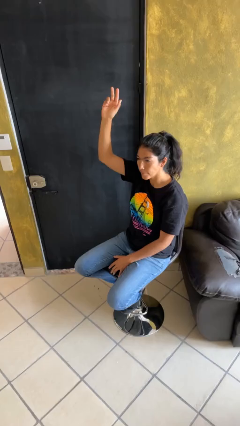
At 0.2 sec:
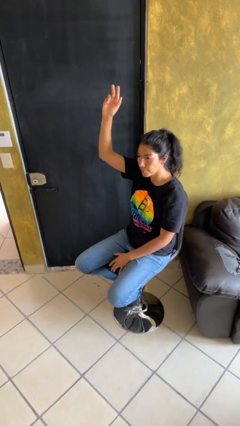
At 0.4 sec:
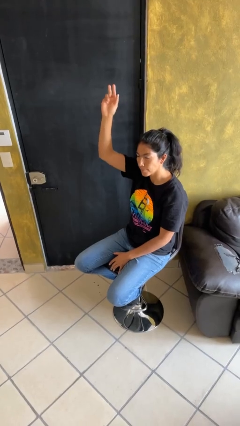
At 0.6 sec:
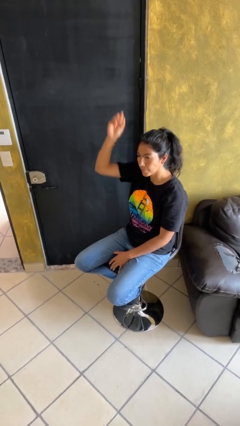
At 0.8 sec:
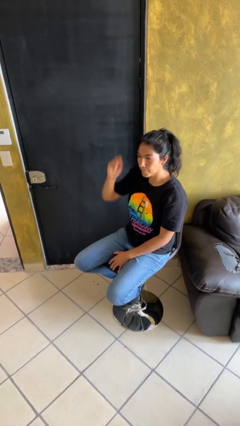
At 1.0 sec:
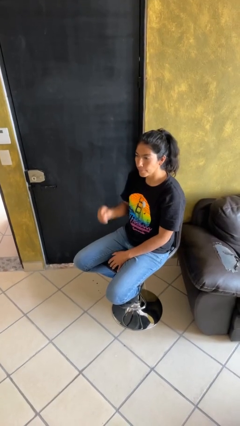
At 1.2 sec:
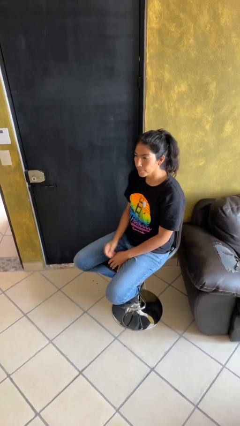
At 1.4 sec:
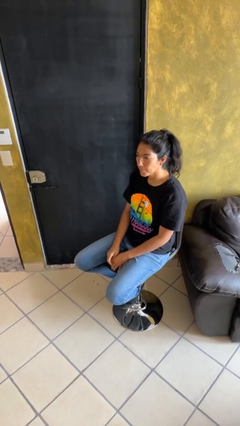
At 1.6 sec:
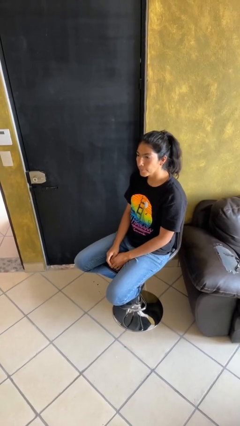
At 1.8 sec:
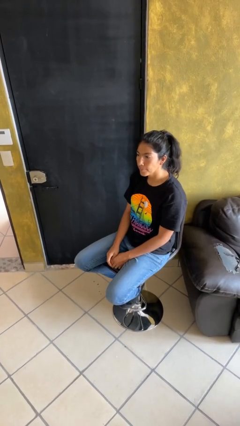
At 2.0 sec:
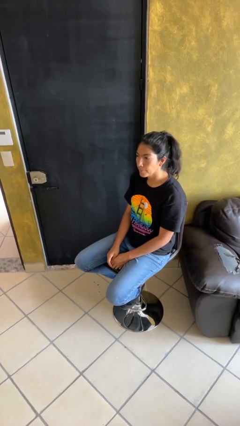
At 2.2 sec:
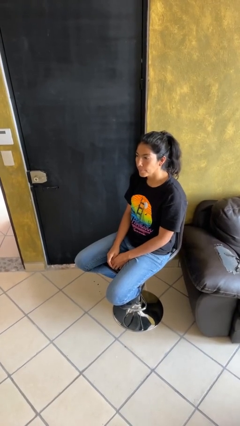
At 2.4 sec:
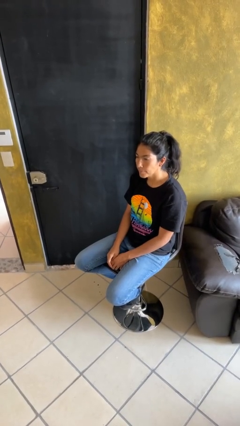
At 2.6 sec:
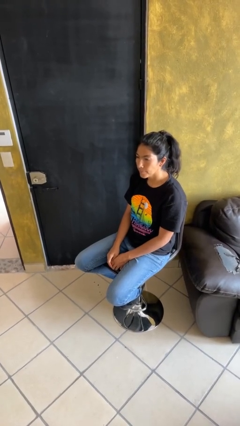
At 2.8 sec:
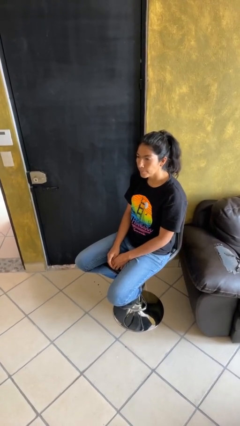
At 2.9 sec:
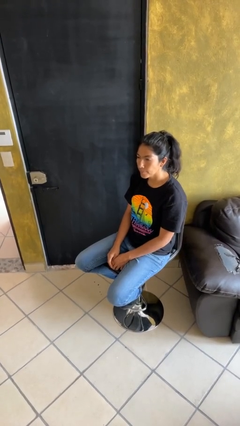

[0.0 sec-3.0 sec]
person gestures lower hand

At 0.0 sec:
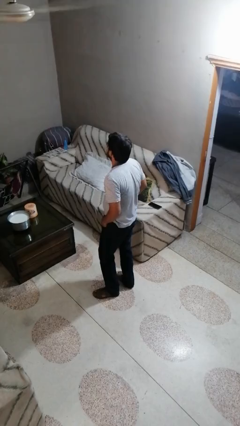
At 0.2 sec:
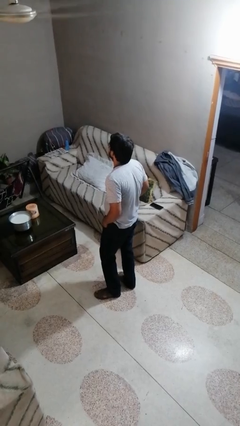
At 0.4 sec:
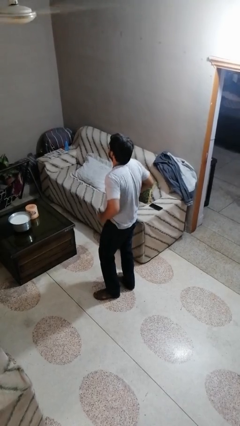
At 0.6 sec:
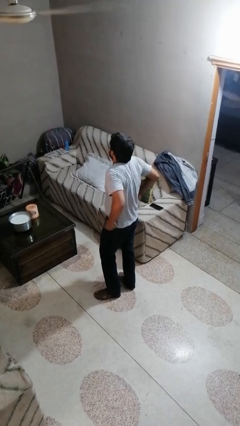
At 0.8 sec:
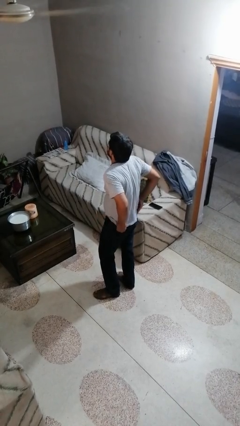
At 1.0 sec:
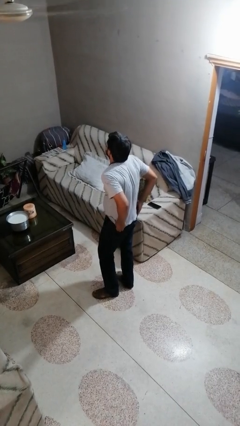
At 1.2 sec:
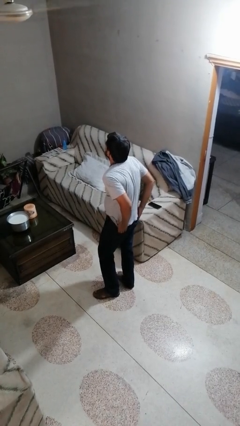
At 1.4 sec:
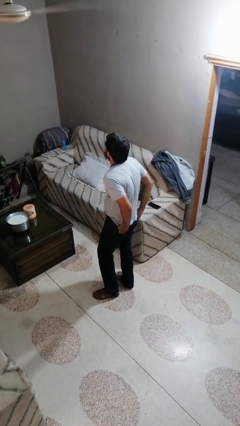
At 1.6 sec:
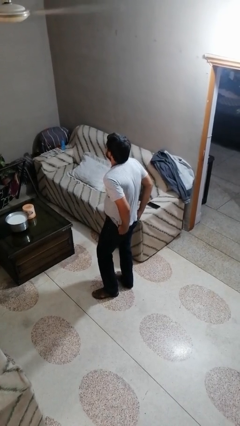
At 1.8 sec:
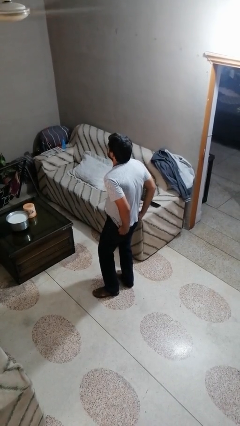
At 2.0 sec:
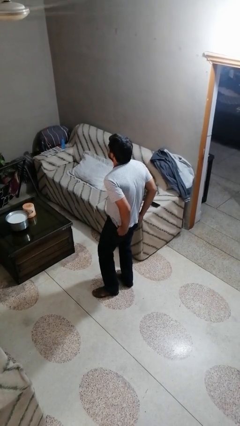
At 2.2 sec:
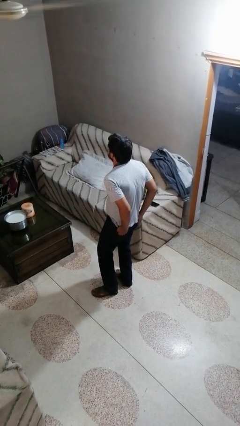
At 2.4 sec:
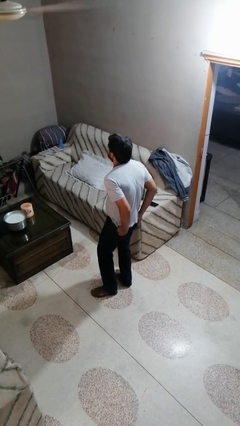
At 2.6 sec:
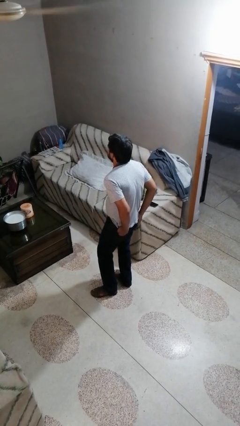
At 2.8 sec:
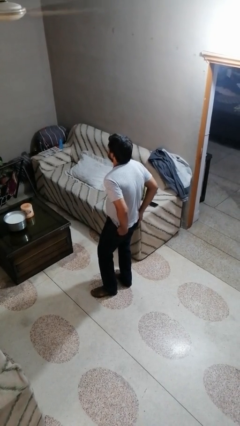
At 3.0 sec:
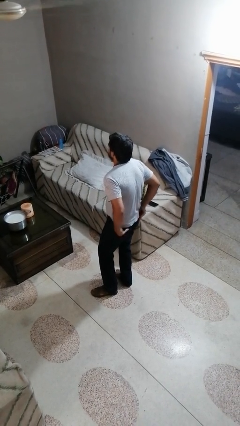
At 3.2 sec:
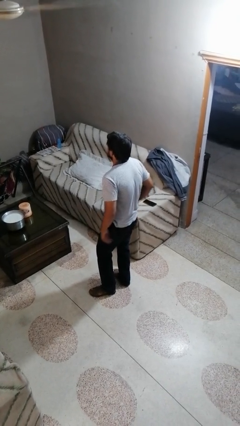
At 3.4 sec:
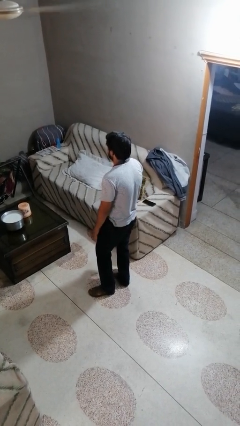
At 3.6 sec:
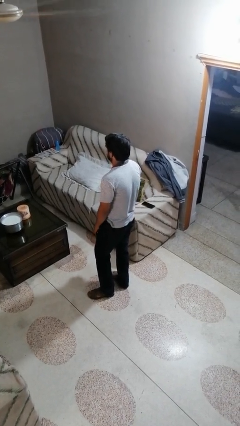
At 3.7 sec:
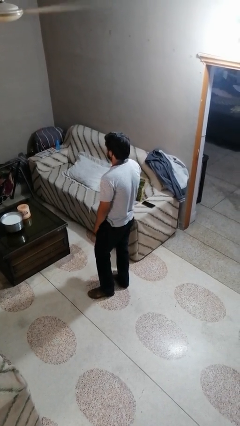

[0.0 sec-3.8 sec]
person puts hands in back pockets

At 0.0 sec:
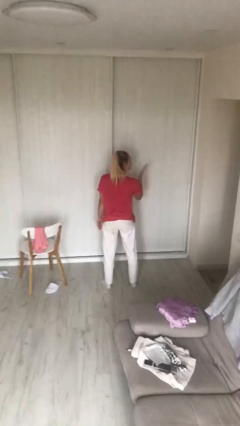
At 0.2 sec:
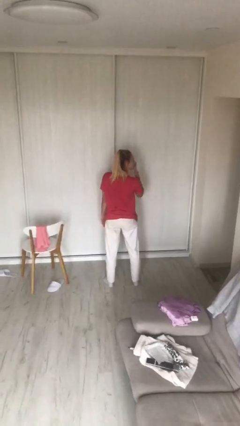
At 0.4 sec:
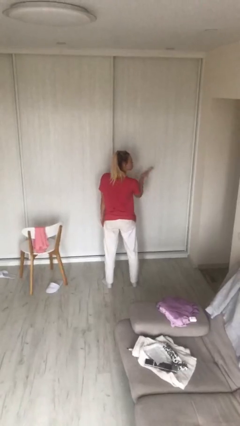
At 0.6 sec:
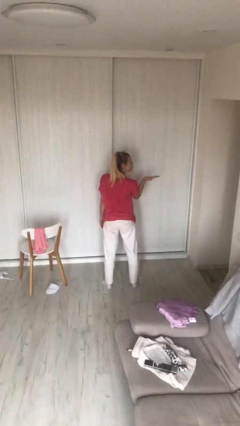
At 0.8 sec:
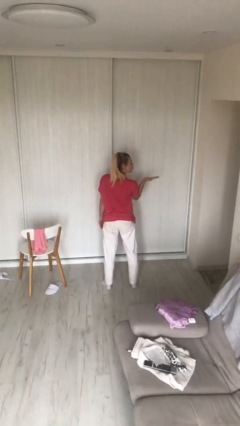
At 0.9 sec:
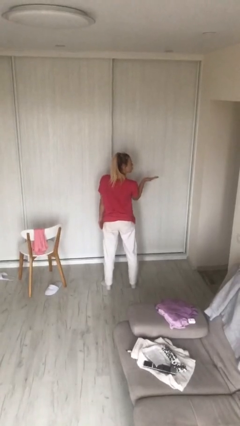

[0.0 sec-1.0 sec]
person gestures blow kiss

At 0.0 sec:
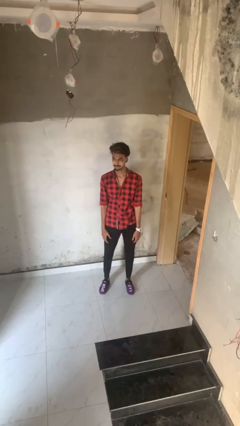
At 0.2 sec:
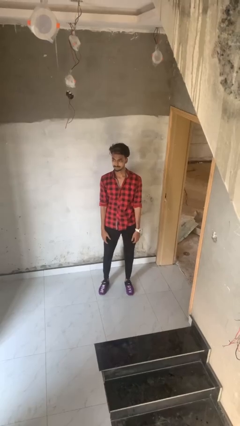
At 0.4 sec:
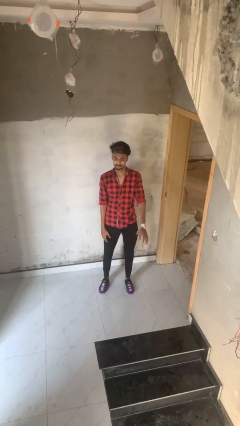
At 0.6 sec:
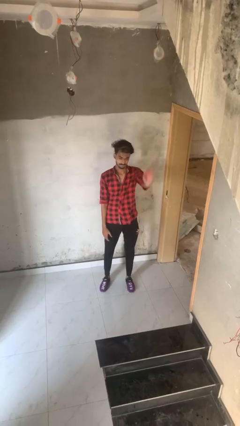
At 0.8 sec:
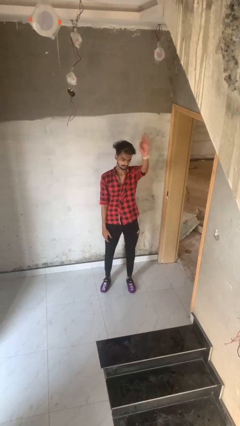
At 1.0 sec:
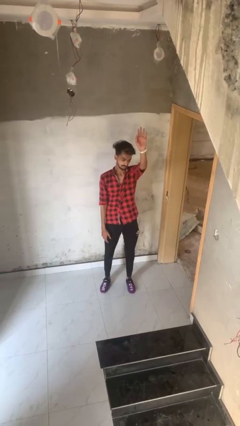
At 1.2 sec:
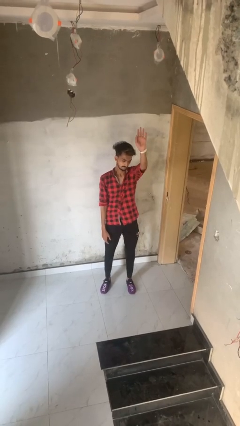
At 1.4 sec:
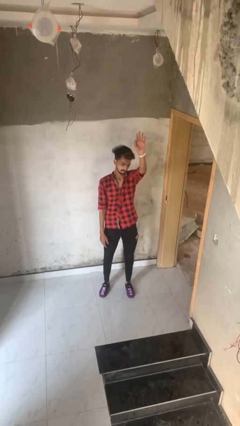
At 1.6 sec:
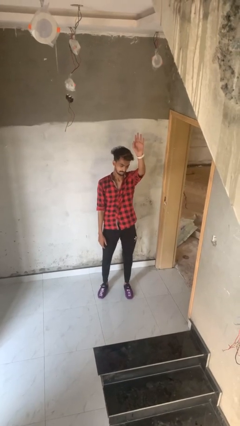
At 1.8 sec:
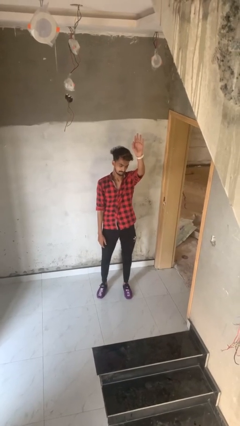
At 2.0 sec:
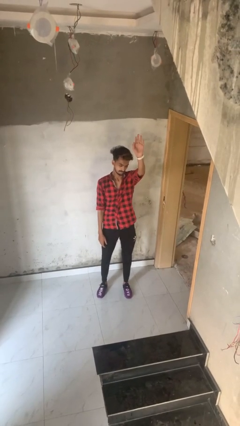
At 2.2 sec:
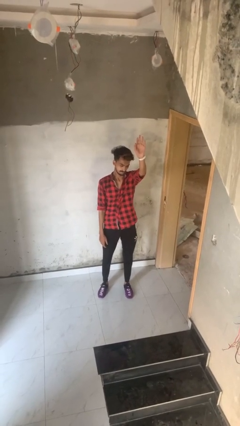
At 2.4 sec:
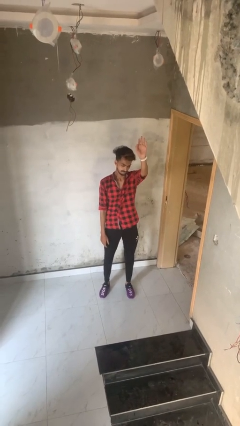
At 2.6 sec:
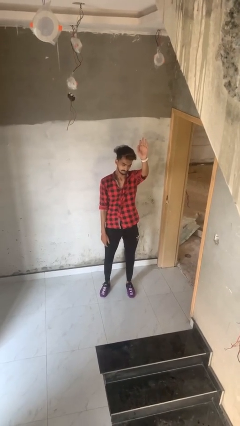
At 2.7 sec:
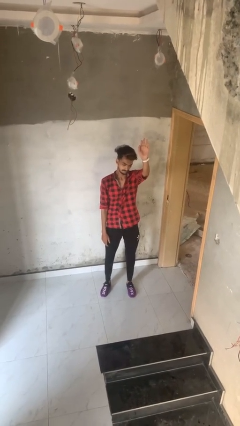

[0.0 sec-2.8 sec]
person gestures raise hand

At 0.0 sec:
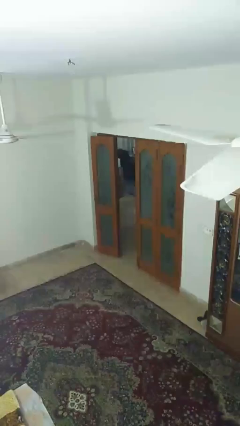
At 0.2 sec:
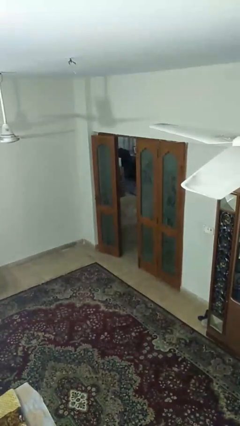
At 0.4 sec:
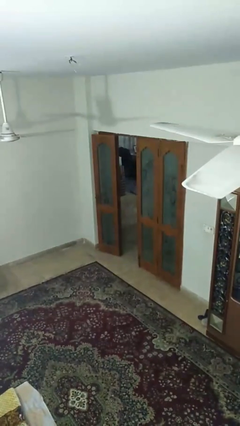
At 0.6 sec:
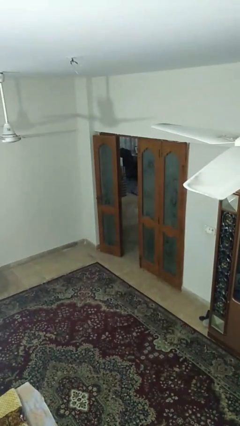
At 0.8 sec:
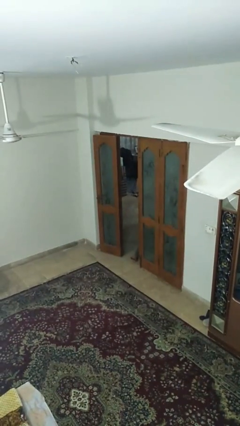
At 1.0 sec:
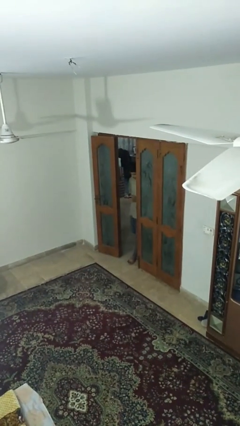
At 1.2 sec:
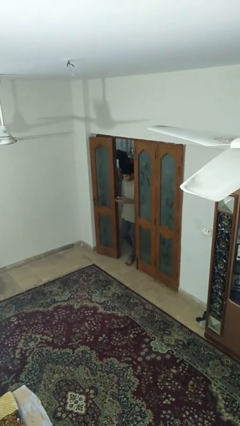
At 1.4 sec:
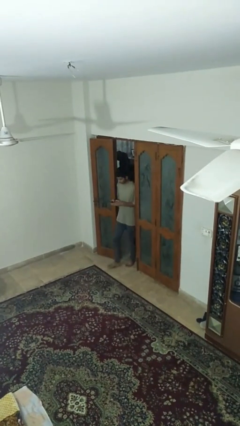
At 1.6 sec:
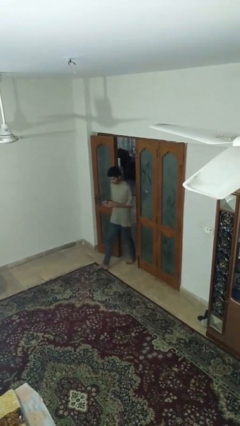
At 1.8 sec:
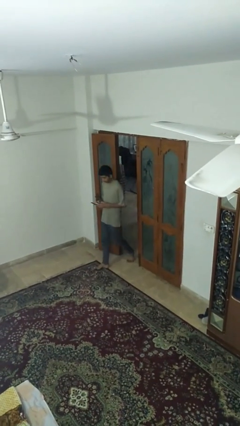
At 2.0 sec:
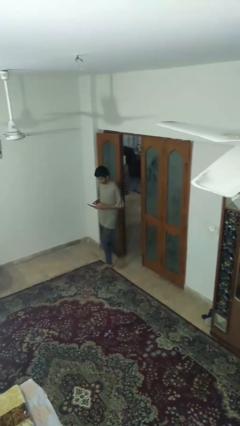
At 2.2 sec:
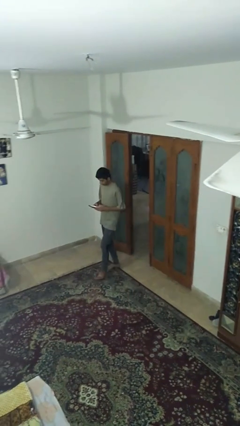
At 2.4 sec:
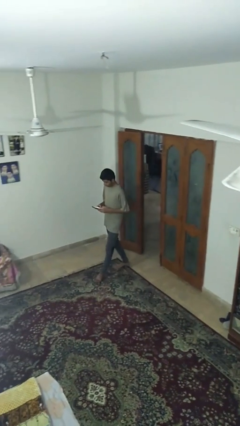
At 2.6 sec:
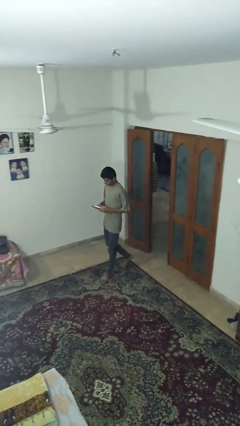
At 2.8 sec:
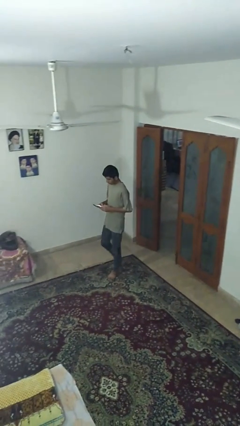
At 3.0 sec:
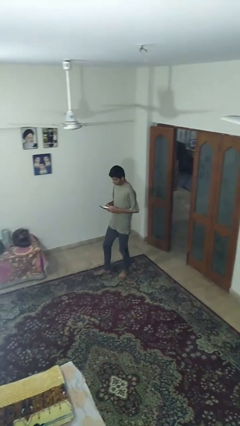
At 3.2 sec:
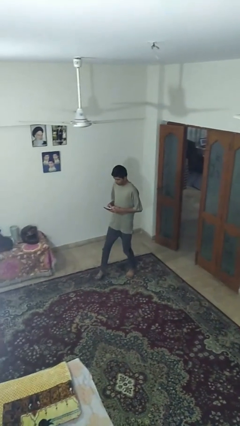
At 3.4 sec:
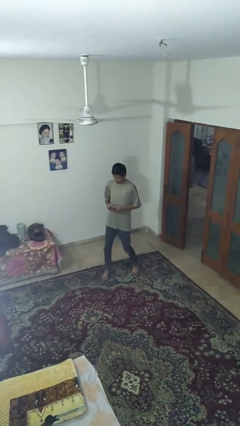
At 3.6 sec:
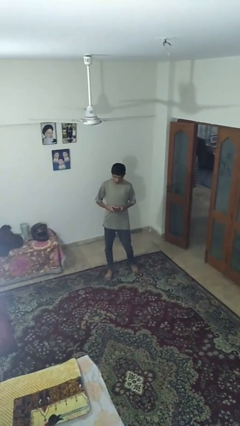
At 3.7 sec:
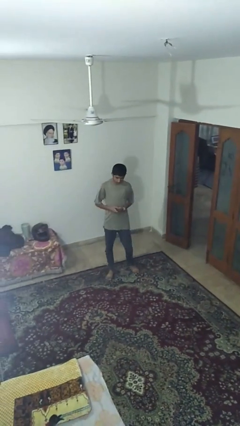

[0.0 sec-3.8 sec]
person enters scene through structure

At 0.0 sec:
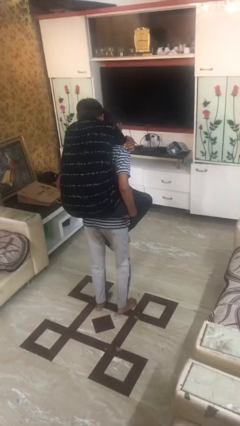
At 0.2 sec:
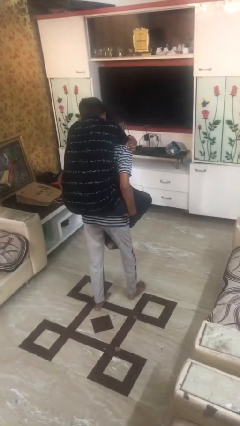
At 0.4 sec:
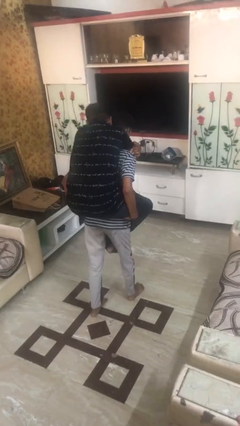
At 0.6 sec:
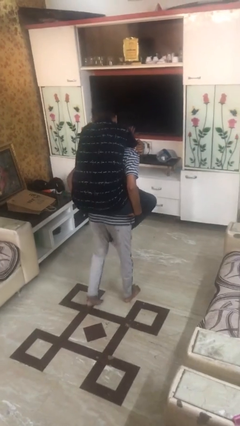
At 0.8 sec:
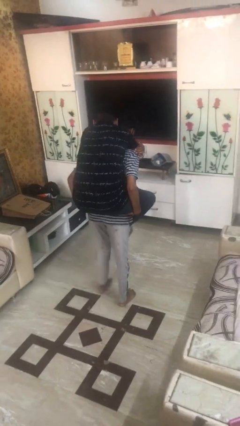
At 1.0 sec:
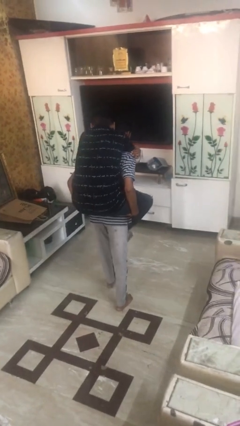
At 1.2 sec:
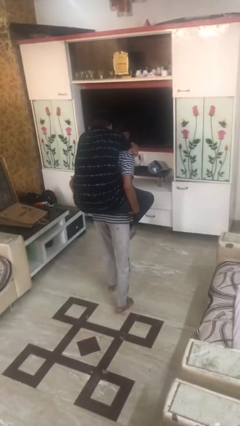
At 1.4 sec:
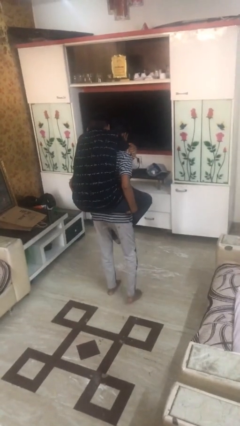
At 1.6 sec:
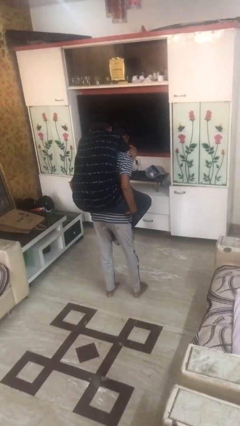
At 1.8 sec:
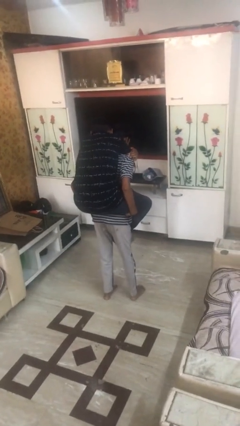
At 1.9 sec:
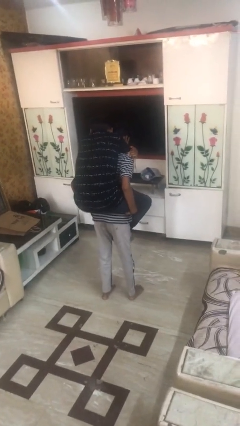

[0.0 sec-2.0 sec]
person carries person on back

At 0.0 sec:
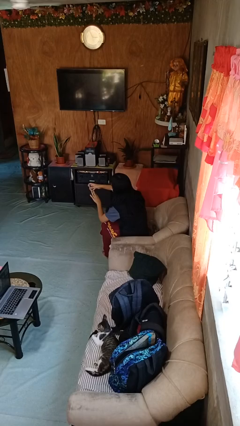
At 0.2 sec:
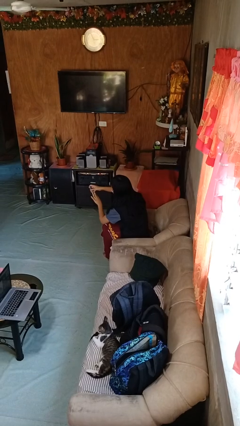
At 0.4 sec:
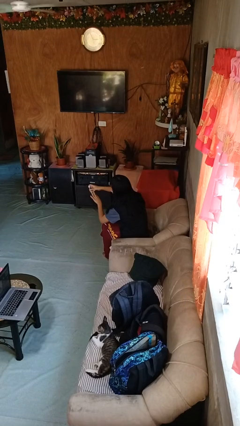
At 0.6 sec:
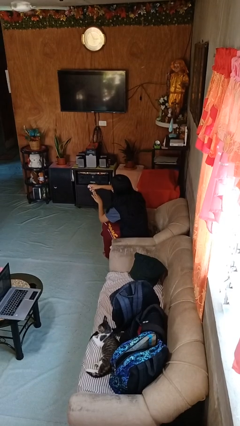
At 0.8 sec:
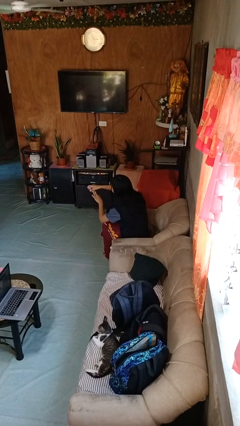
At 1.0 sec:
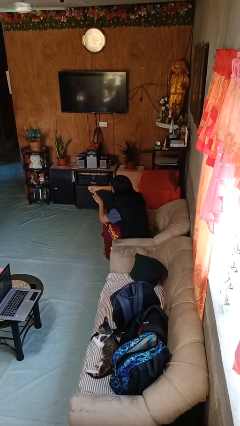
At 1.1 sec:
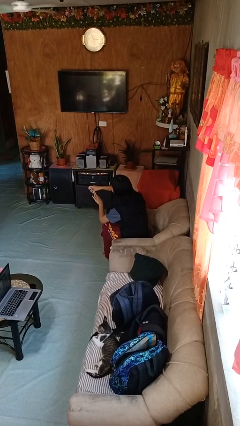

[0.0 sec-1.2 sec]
person clips fingernails
